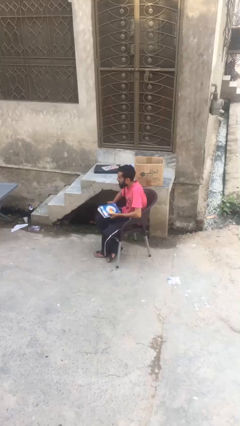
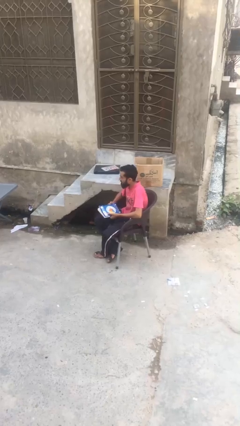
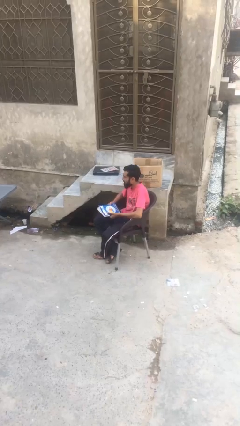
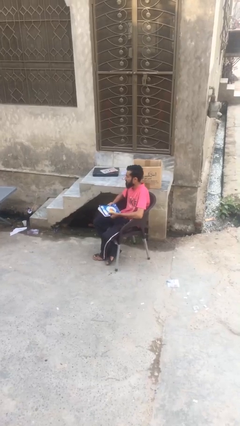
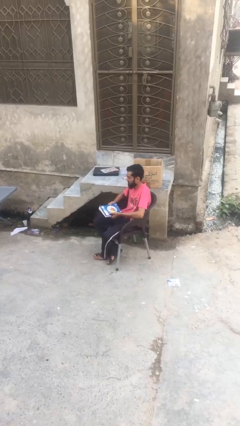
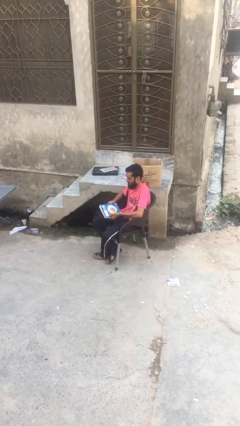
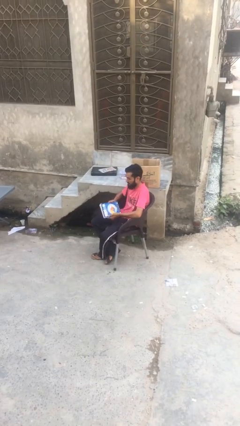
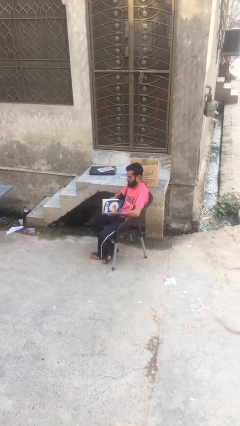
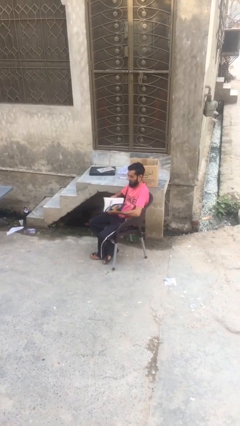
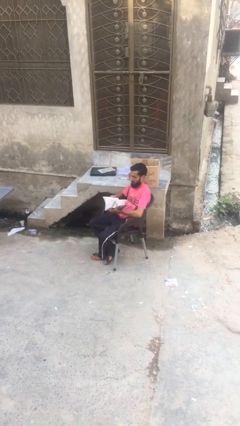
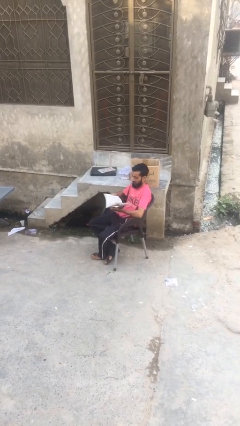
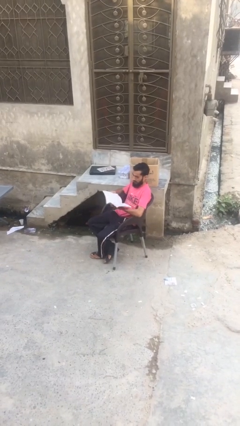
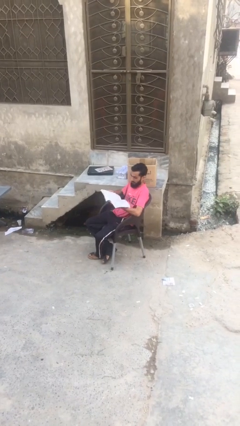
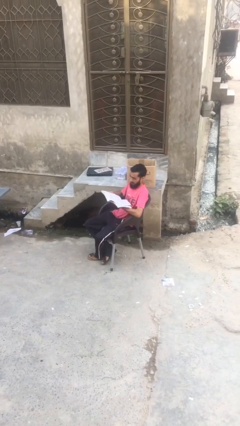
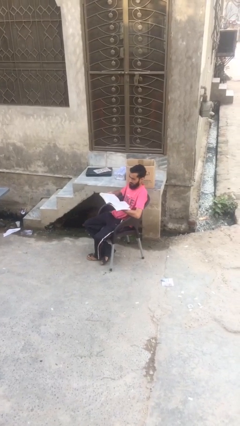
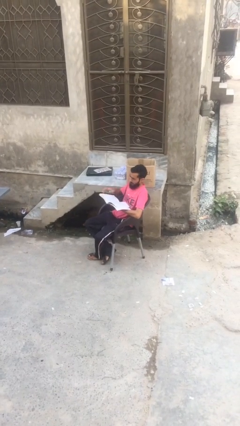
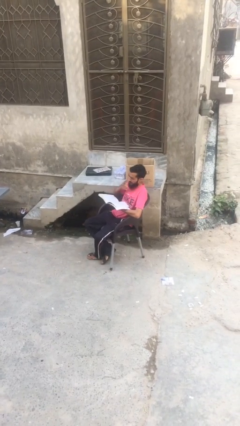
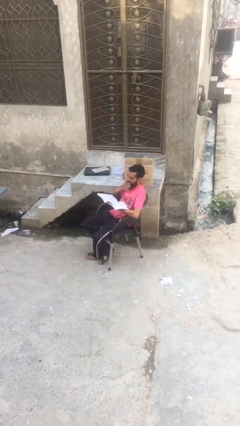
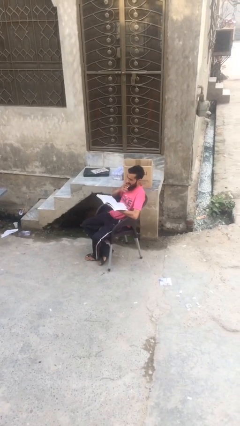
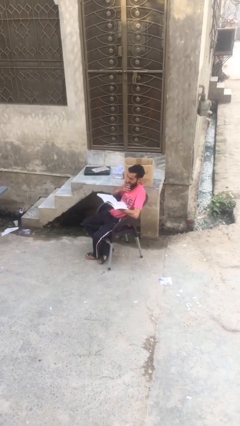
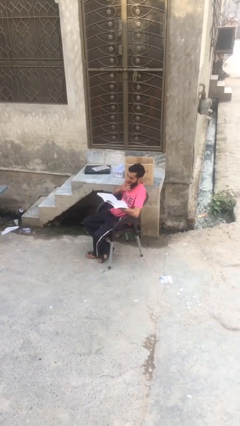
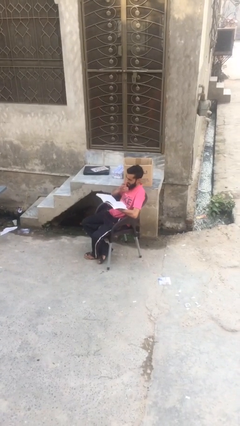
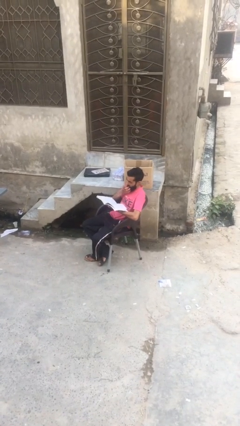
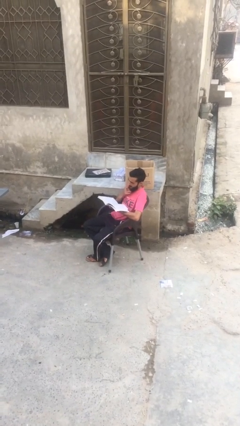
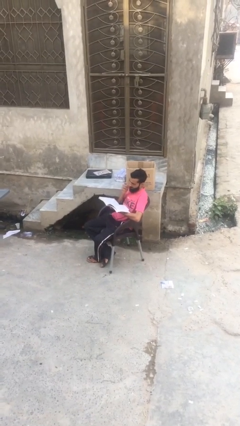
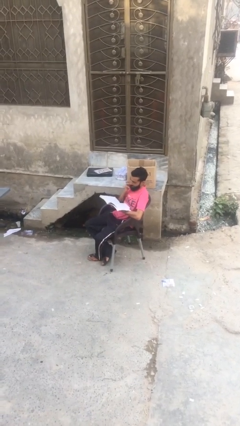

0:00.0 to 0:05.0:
person reads document

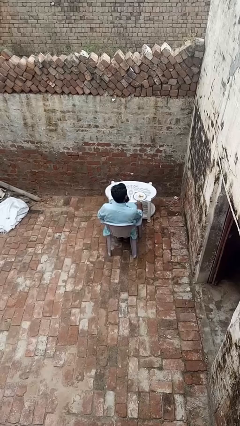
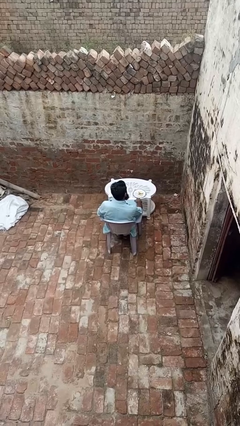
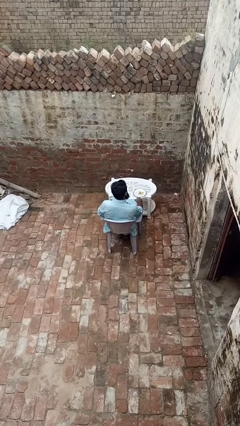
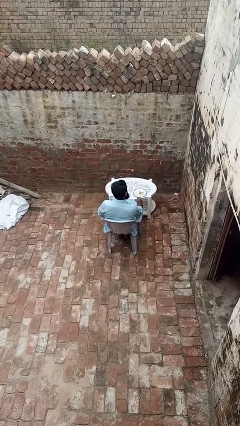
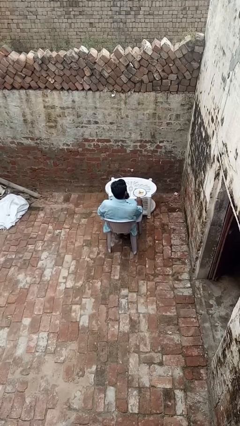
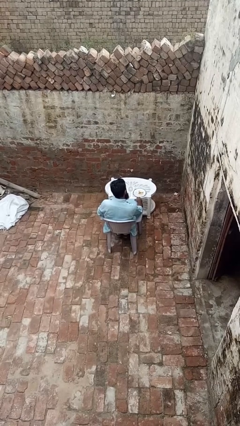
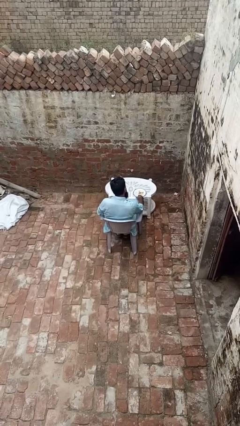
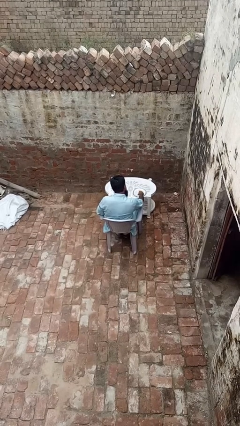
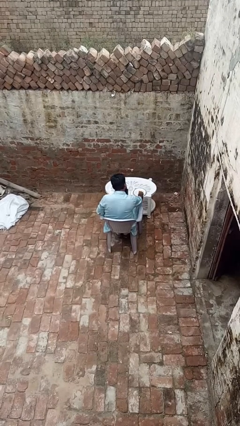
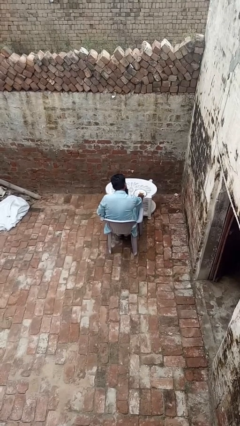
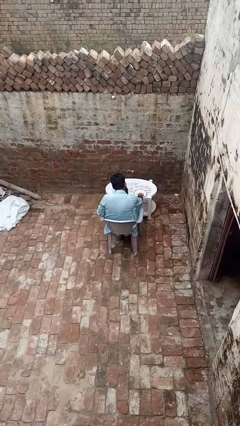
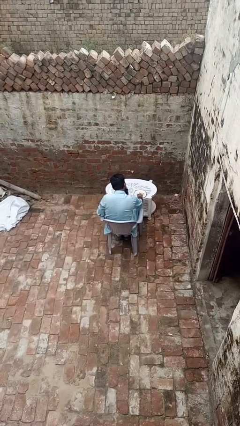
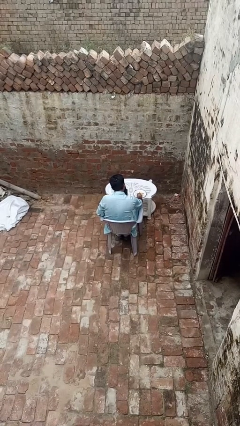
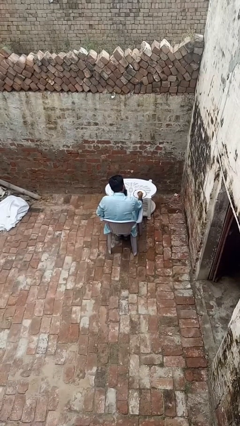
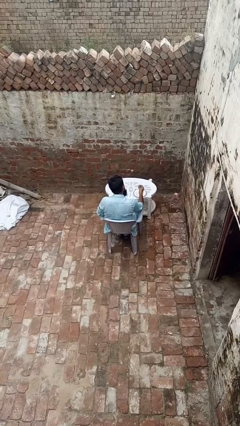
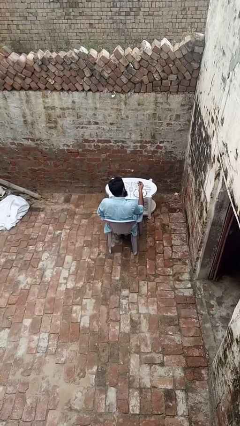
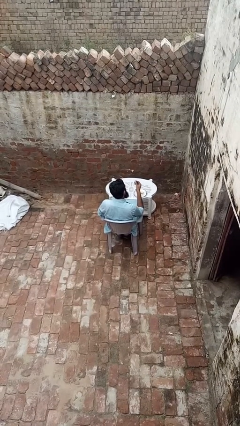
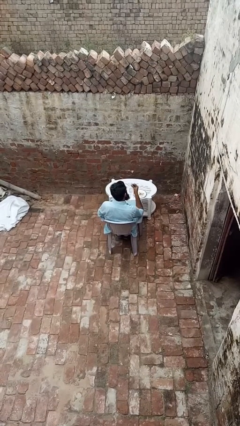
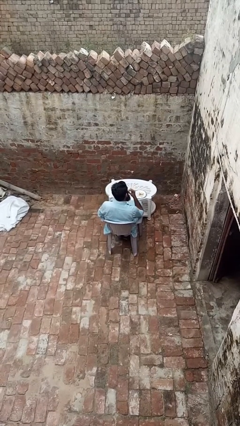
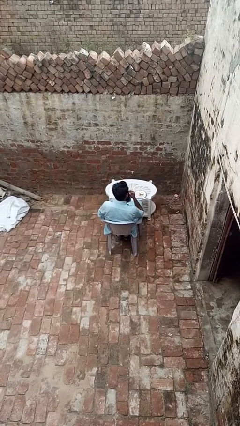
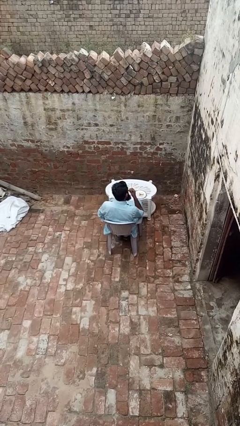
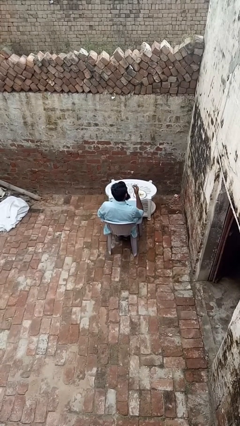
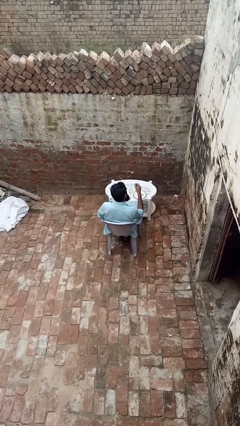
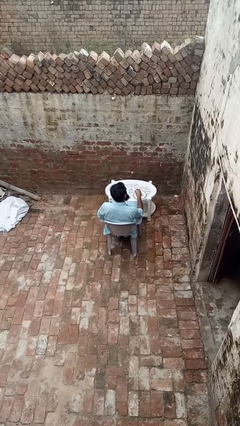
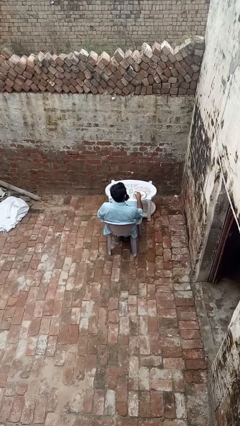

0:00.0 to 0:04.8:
person eats with hands

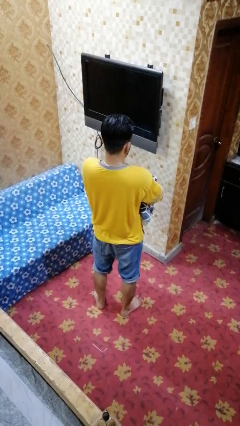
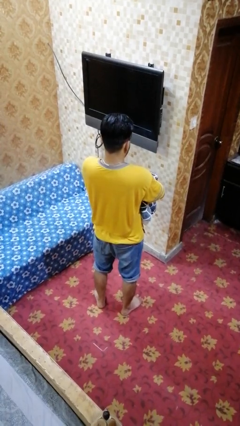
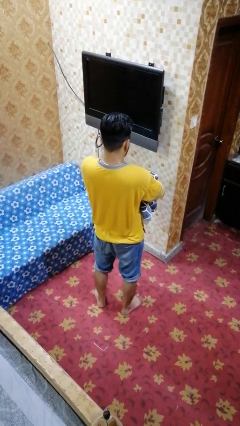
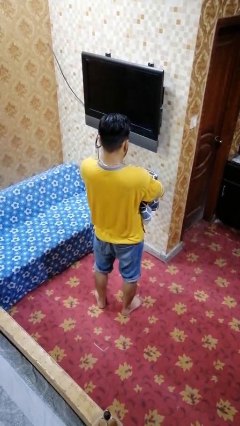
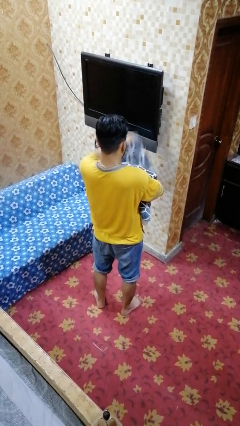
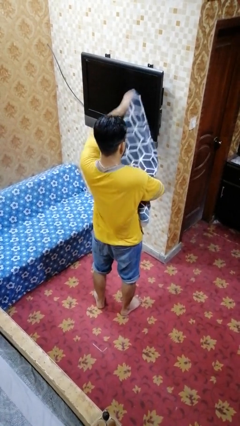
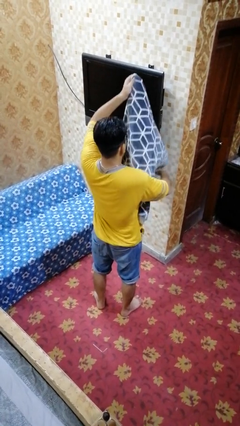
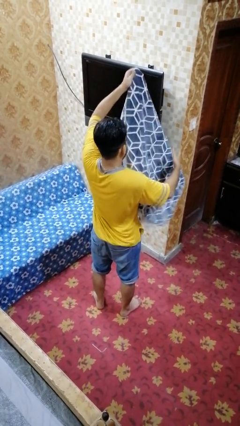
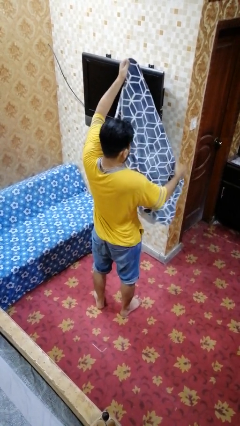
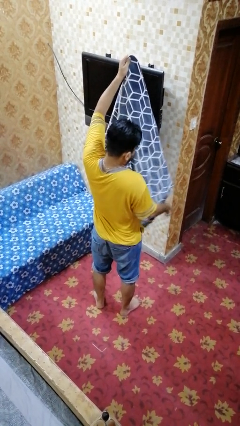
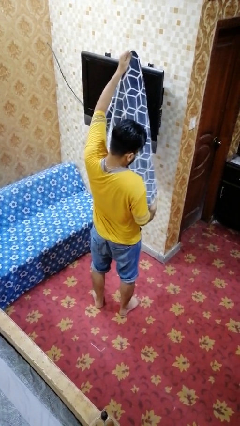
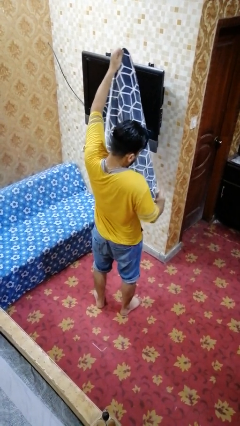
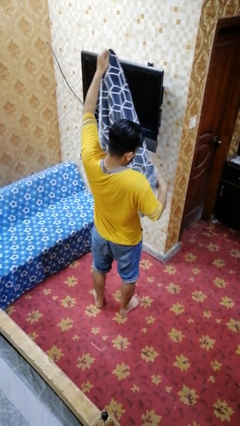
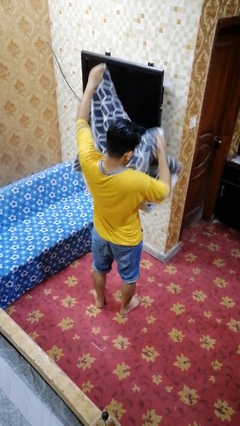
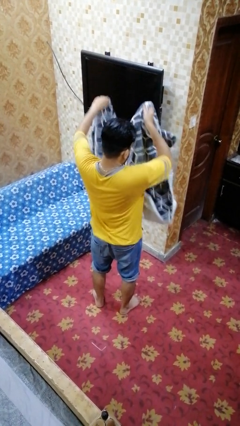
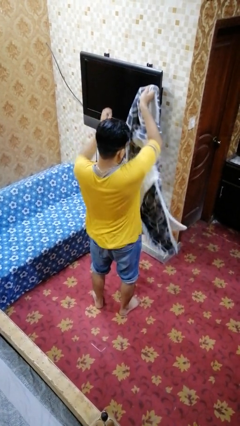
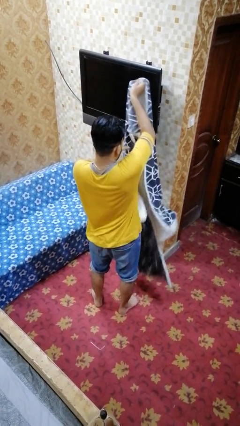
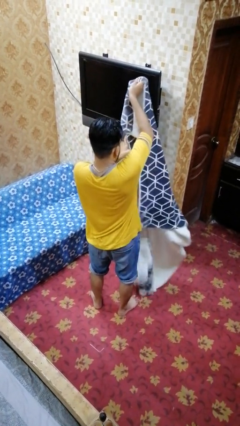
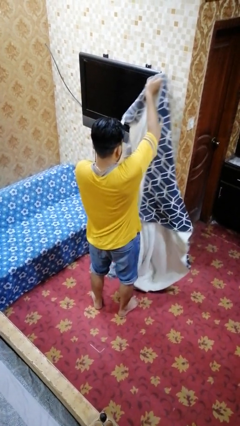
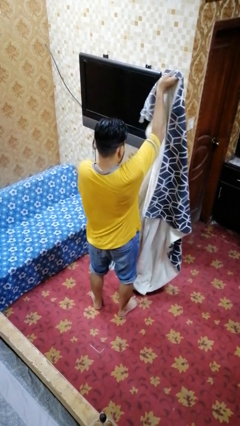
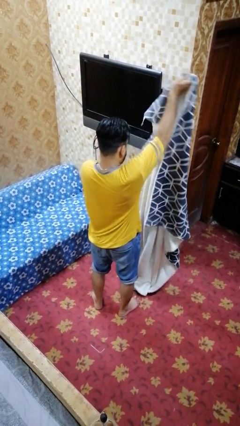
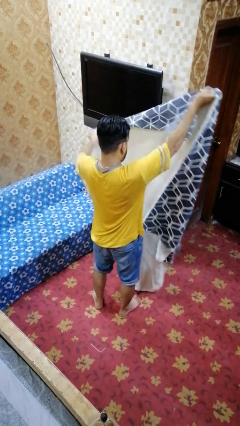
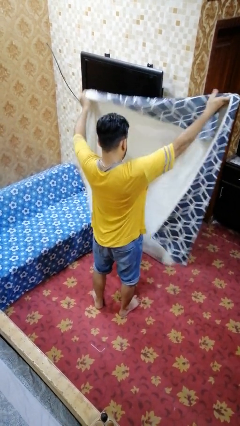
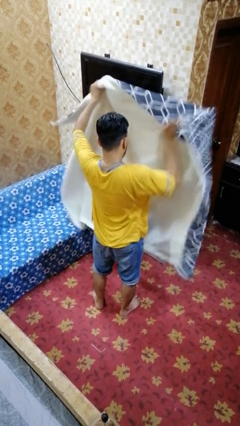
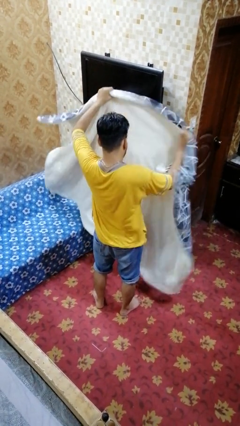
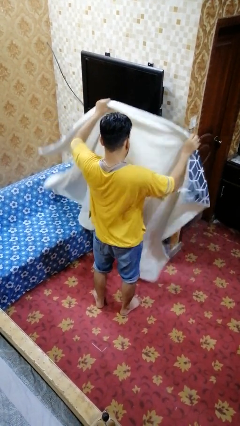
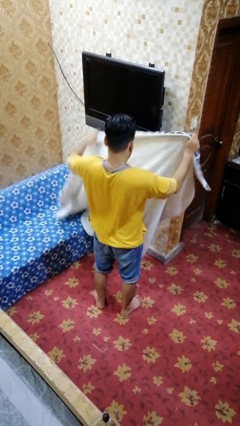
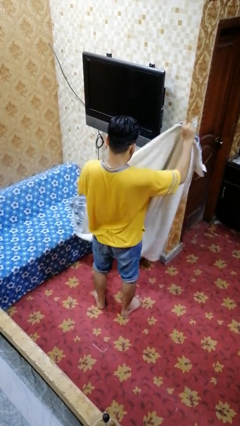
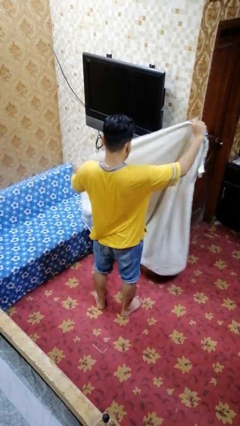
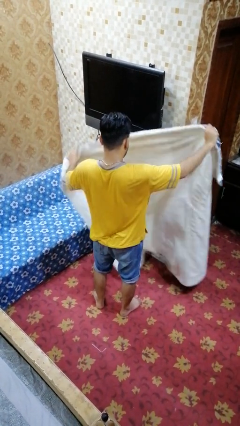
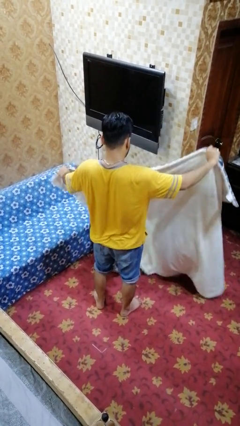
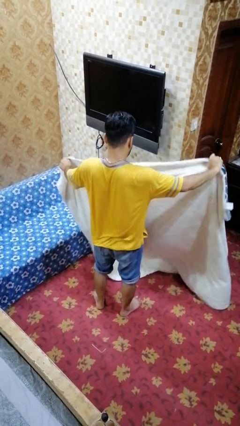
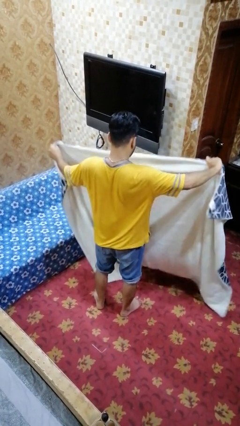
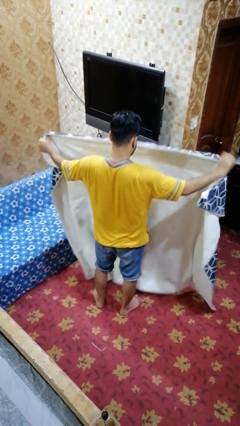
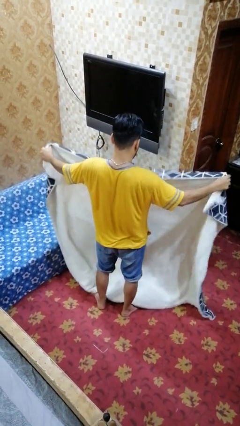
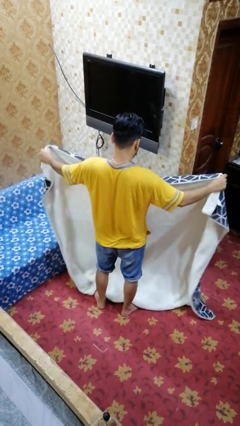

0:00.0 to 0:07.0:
person unfolds blanket

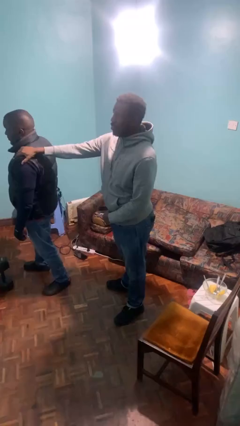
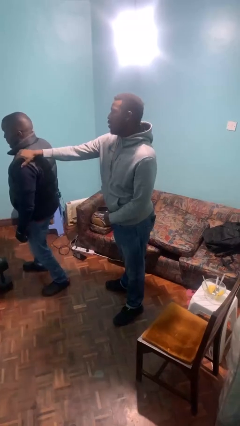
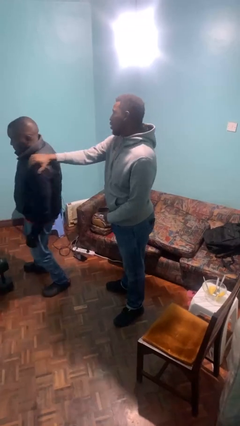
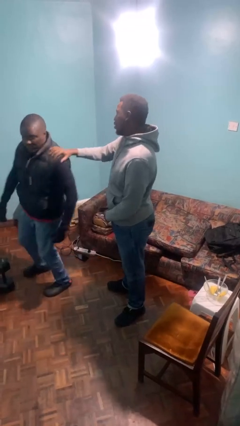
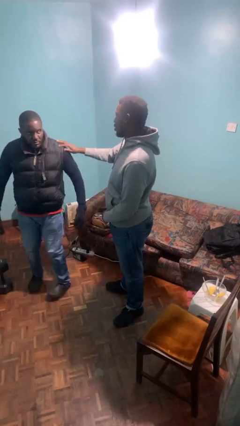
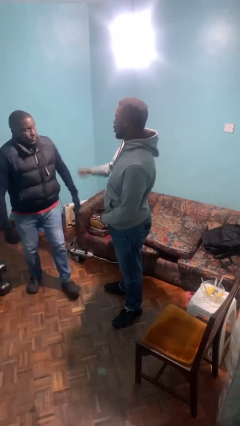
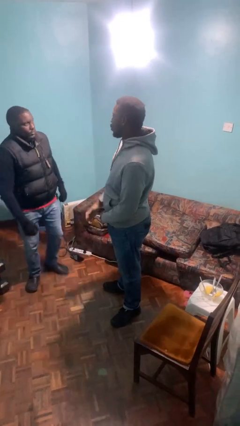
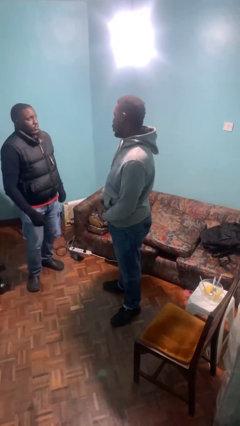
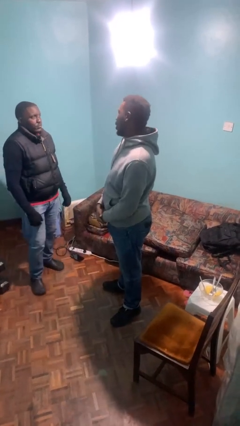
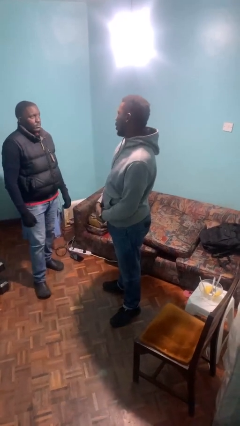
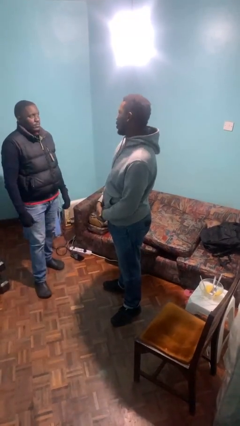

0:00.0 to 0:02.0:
person spins person around
